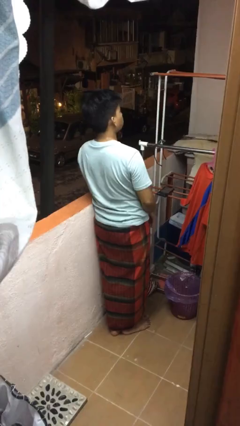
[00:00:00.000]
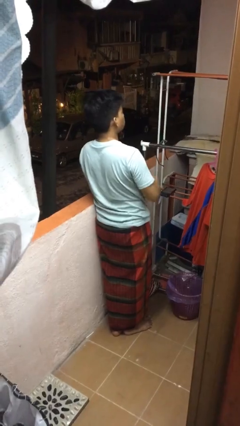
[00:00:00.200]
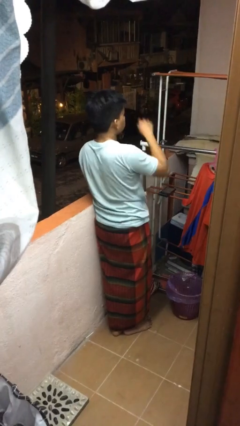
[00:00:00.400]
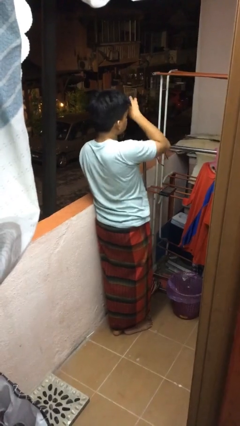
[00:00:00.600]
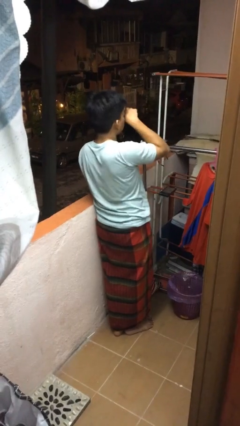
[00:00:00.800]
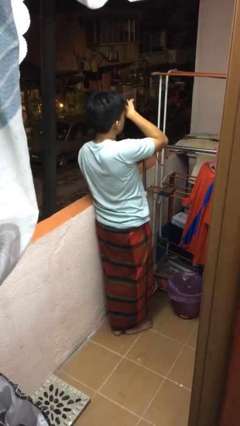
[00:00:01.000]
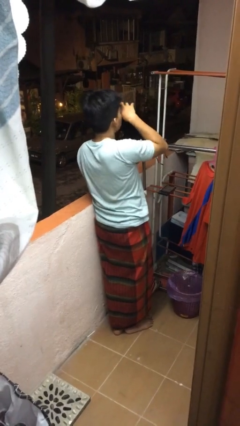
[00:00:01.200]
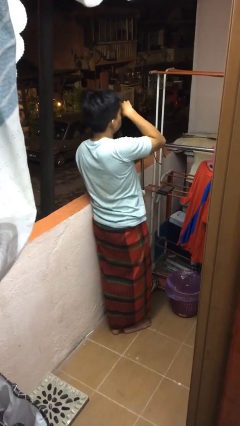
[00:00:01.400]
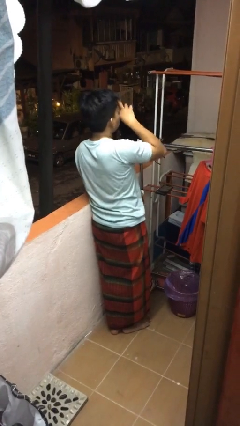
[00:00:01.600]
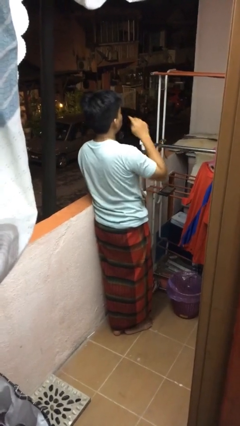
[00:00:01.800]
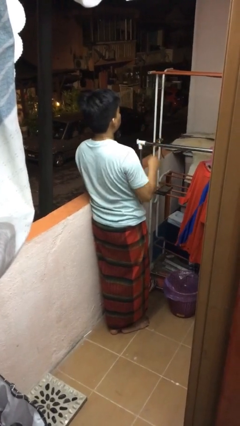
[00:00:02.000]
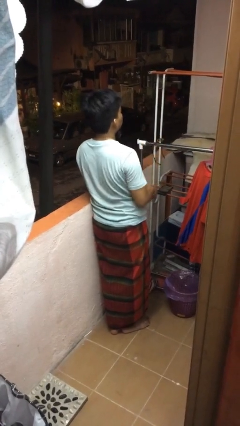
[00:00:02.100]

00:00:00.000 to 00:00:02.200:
person rubs eyes

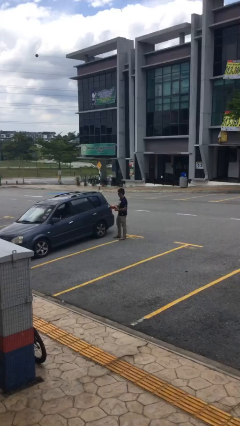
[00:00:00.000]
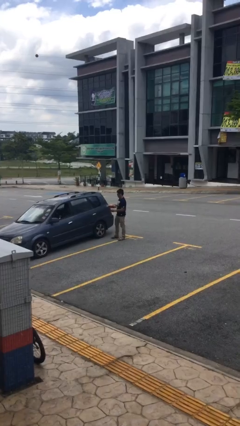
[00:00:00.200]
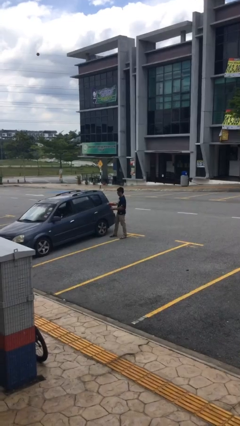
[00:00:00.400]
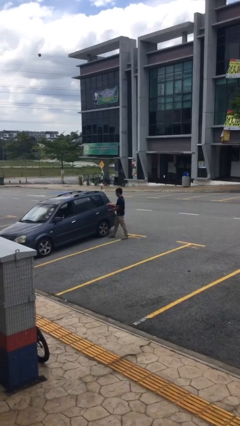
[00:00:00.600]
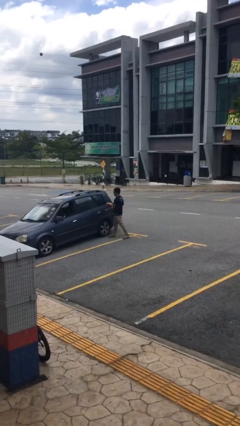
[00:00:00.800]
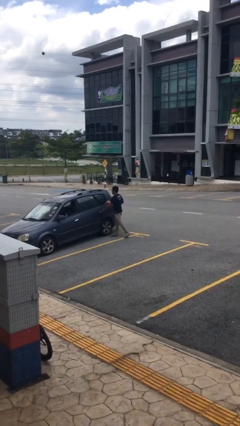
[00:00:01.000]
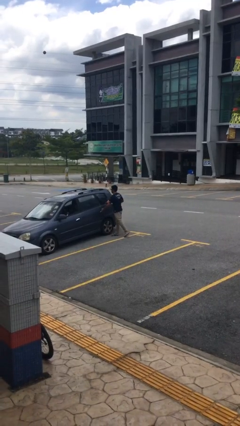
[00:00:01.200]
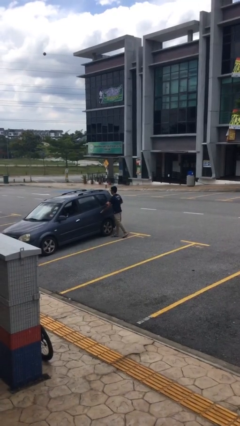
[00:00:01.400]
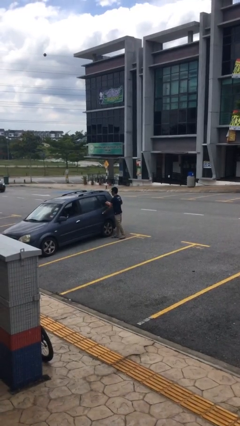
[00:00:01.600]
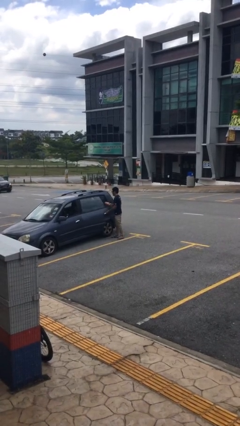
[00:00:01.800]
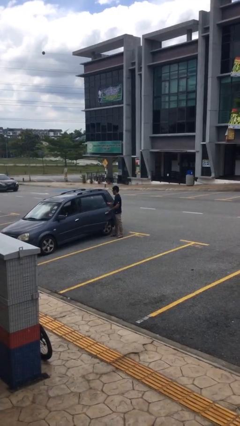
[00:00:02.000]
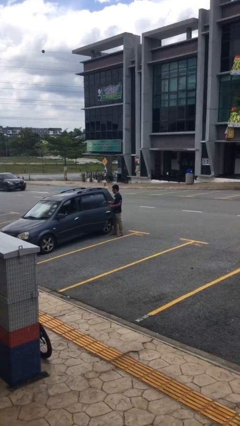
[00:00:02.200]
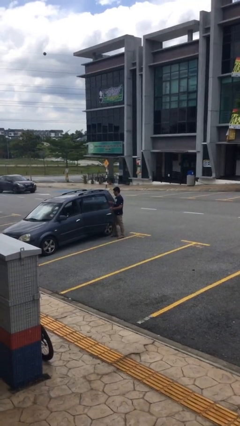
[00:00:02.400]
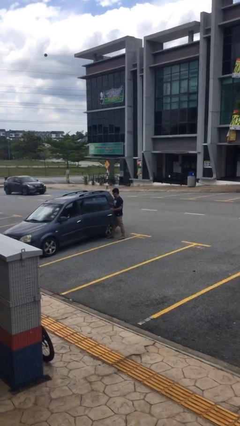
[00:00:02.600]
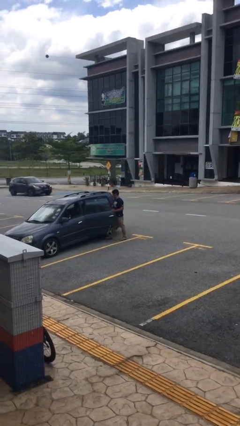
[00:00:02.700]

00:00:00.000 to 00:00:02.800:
person opens car door

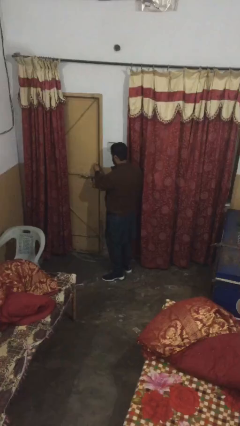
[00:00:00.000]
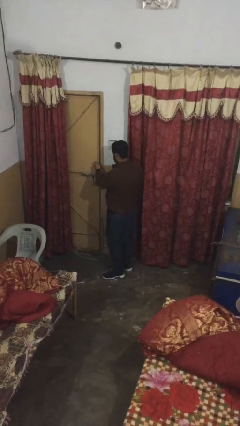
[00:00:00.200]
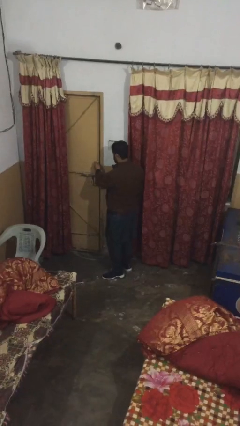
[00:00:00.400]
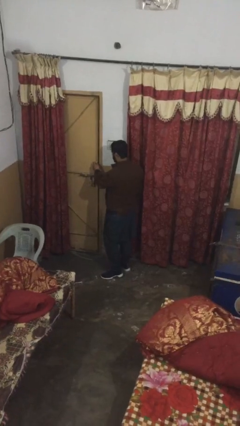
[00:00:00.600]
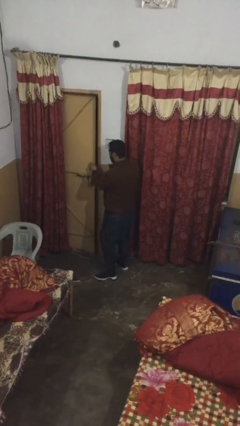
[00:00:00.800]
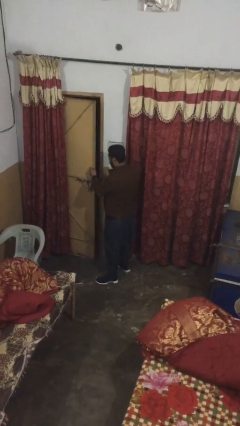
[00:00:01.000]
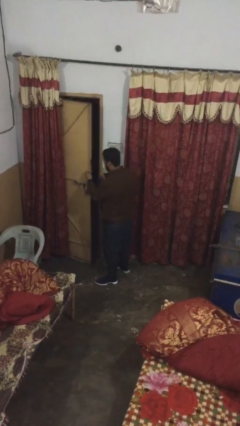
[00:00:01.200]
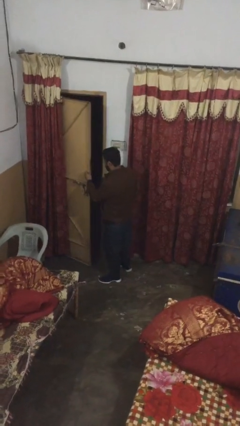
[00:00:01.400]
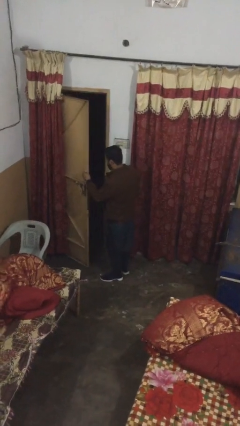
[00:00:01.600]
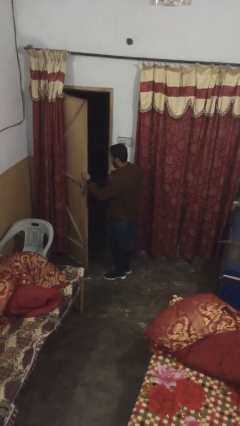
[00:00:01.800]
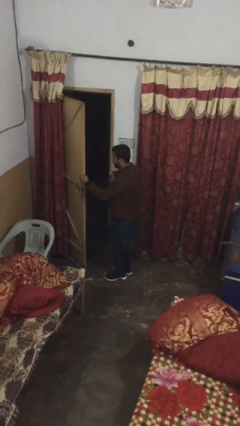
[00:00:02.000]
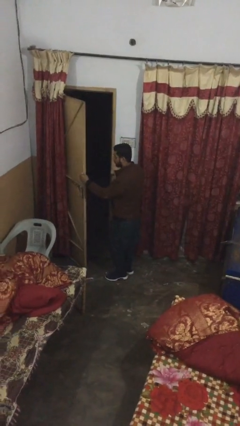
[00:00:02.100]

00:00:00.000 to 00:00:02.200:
person opens facility door

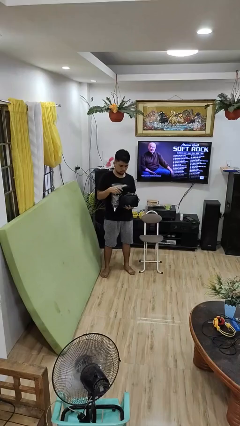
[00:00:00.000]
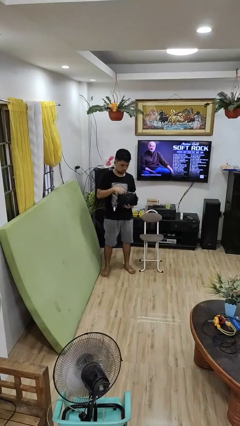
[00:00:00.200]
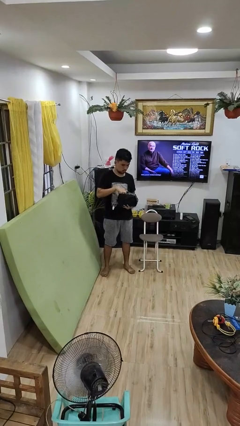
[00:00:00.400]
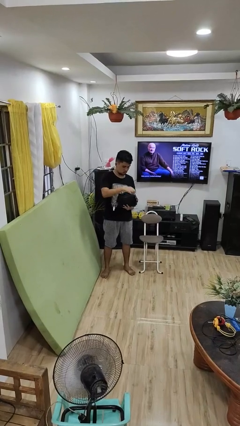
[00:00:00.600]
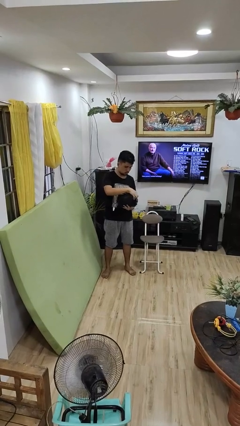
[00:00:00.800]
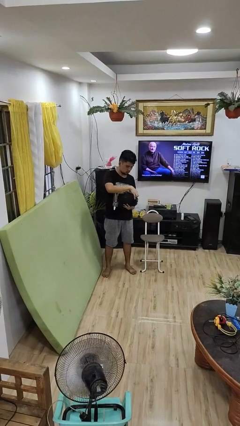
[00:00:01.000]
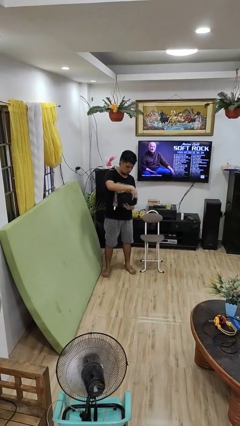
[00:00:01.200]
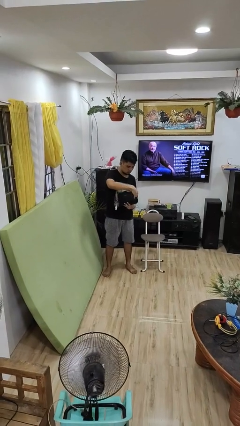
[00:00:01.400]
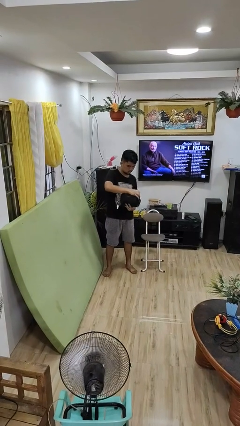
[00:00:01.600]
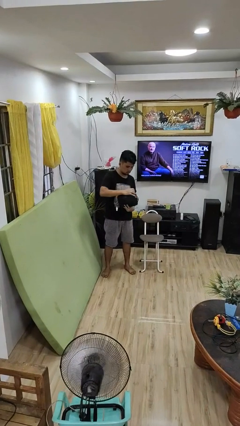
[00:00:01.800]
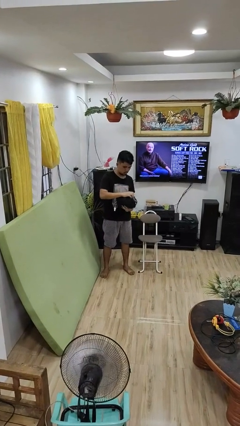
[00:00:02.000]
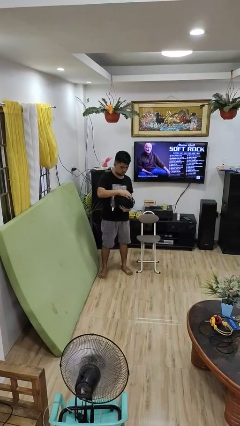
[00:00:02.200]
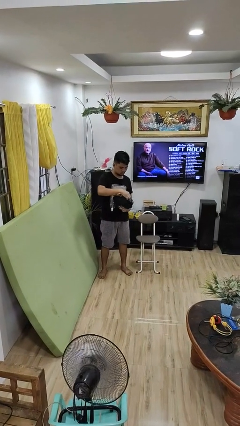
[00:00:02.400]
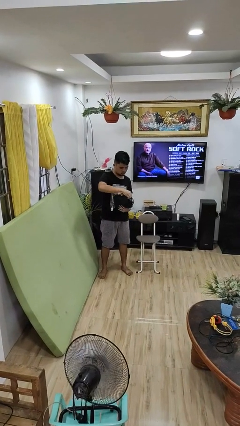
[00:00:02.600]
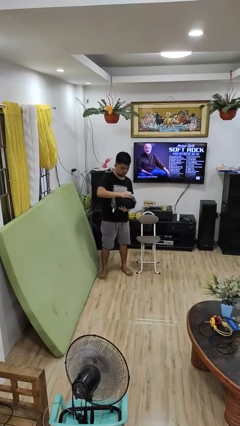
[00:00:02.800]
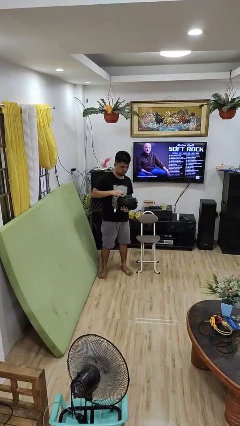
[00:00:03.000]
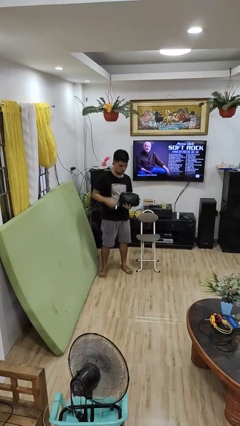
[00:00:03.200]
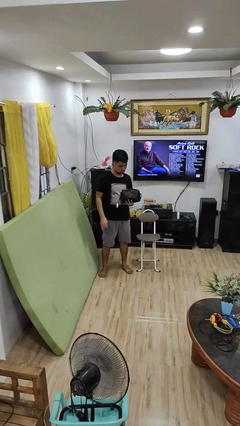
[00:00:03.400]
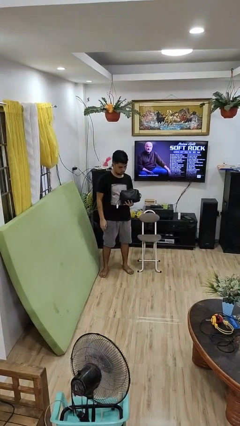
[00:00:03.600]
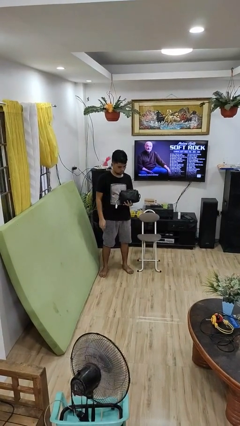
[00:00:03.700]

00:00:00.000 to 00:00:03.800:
person puts object into purse

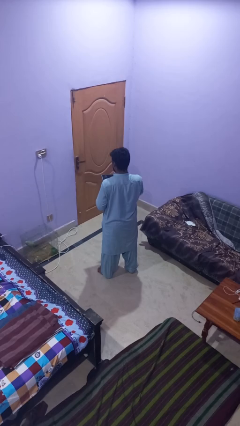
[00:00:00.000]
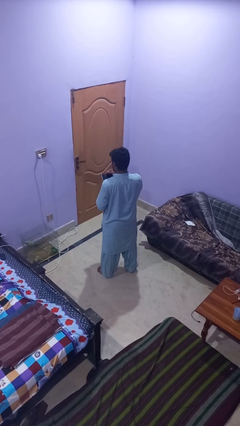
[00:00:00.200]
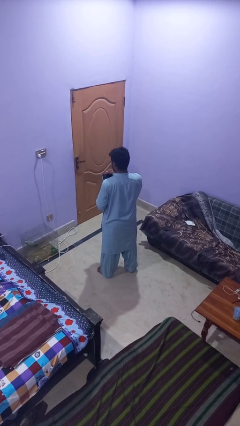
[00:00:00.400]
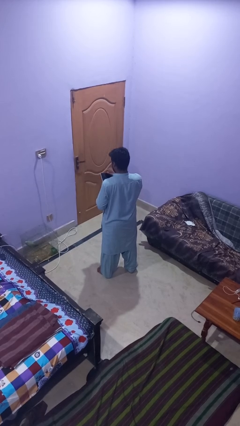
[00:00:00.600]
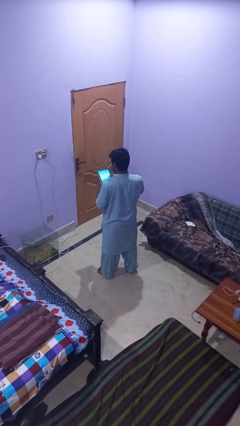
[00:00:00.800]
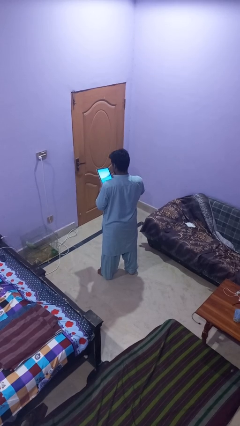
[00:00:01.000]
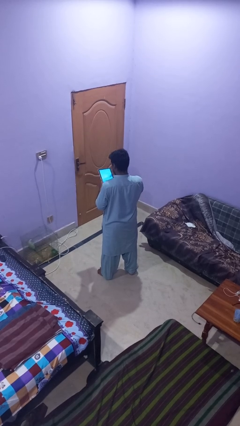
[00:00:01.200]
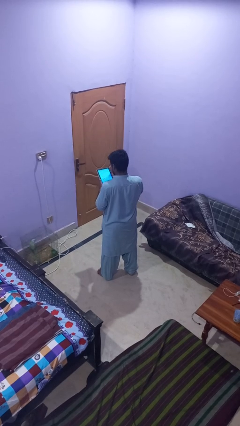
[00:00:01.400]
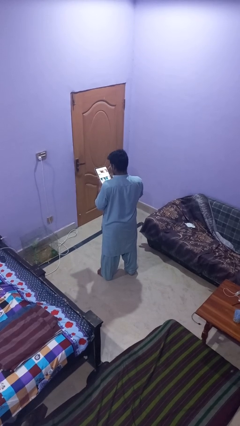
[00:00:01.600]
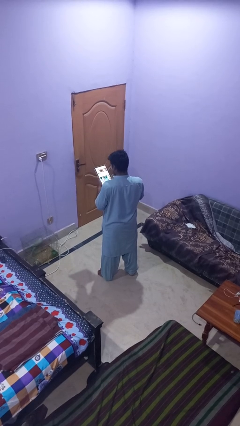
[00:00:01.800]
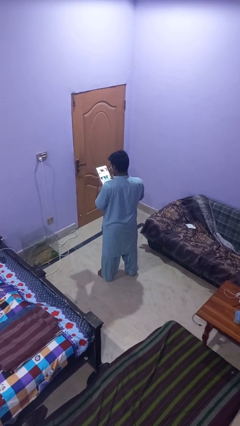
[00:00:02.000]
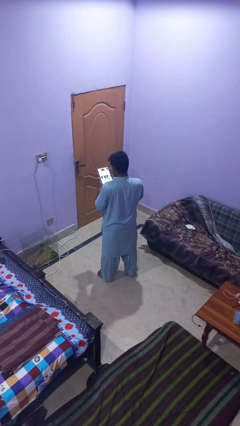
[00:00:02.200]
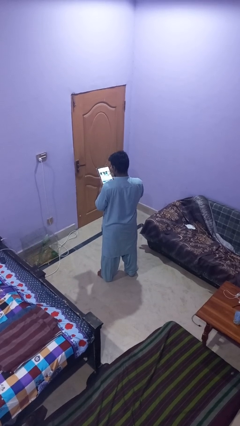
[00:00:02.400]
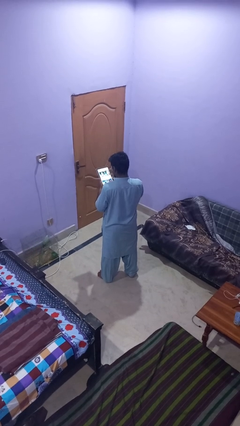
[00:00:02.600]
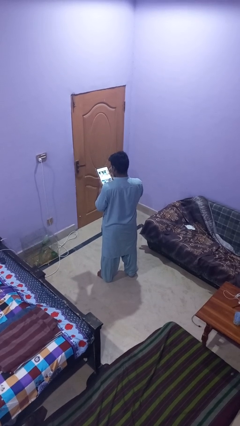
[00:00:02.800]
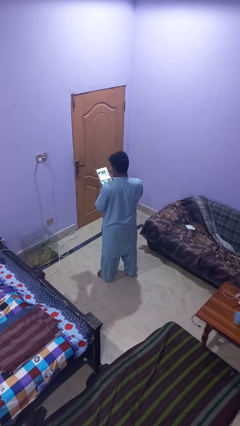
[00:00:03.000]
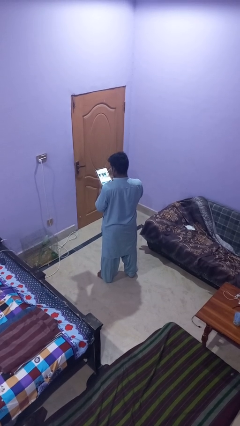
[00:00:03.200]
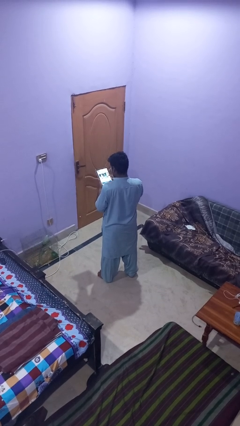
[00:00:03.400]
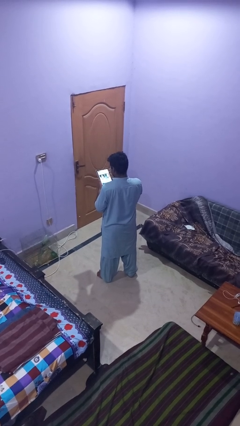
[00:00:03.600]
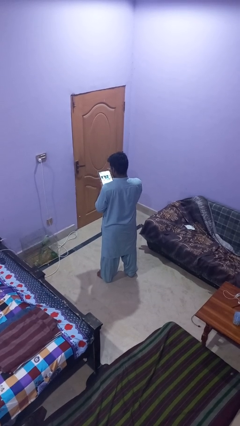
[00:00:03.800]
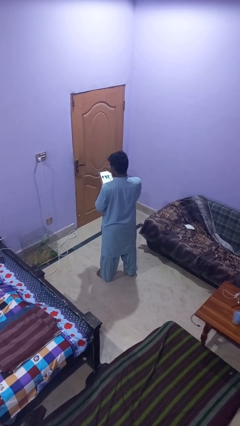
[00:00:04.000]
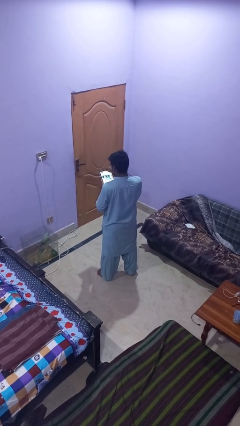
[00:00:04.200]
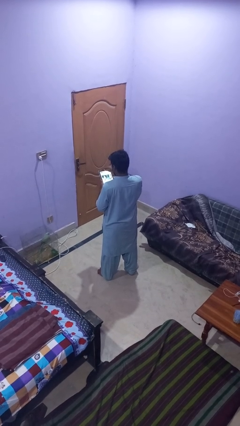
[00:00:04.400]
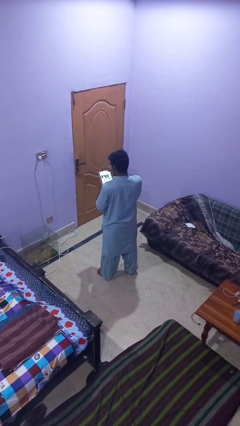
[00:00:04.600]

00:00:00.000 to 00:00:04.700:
person interacts with tablet

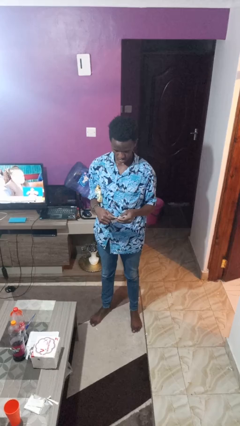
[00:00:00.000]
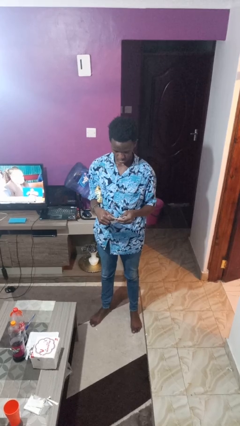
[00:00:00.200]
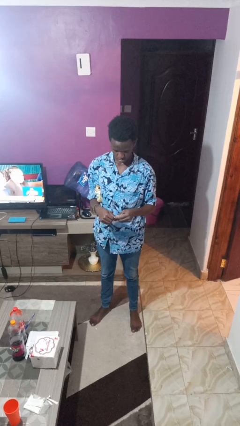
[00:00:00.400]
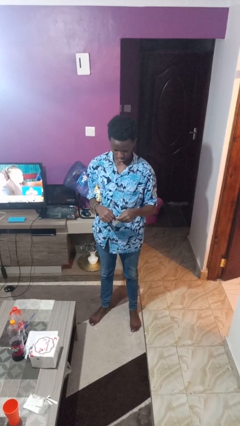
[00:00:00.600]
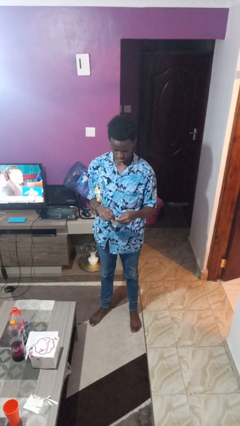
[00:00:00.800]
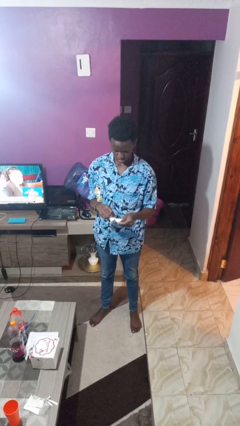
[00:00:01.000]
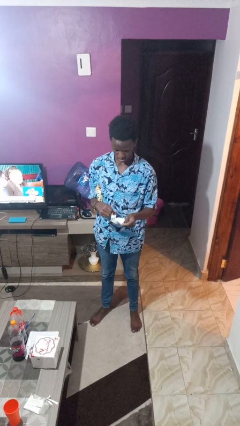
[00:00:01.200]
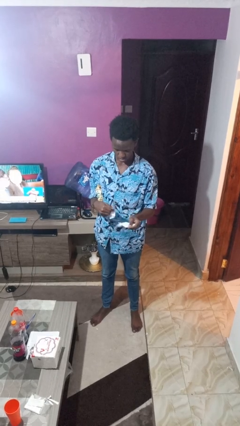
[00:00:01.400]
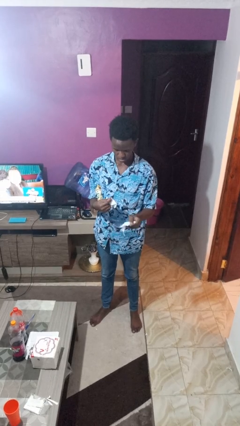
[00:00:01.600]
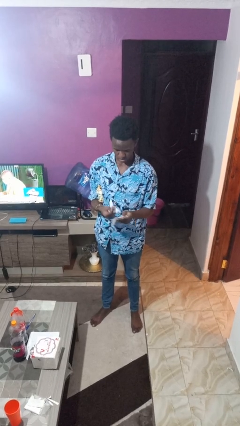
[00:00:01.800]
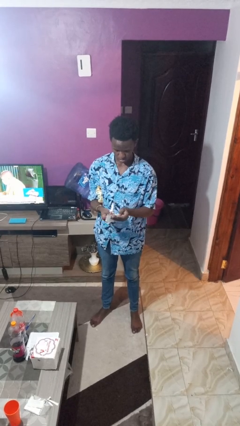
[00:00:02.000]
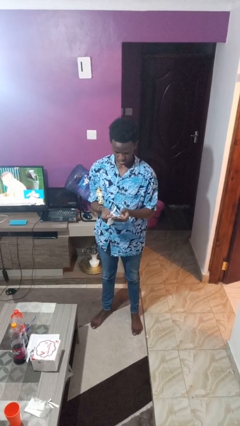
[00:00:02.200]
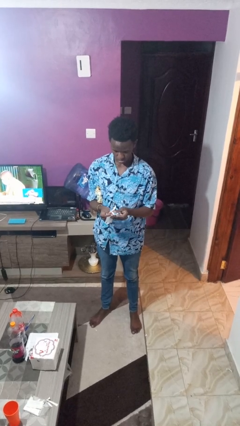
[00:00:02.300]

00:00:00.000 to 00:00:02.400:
person tears paper
